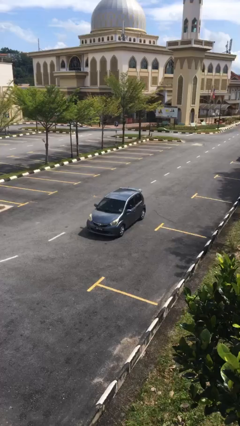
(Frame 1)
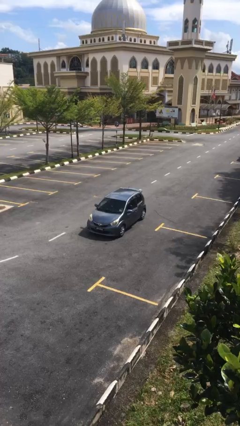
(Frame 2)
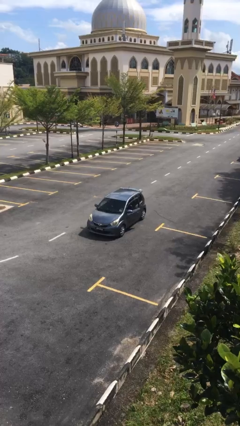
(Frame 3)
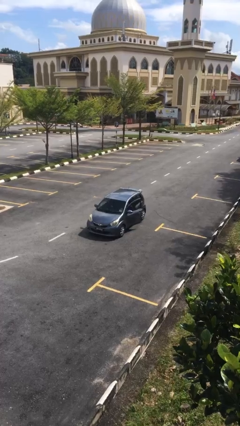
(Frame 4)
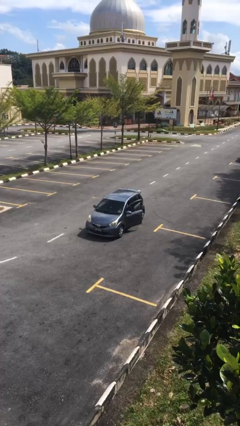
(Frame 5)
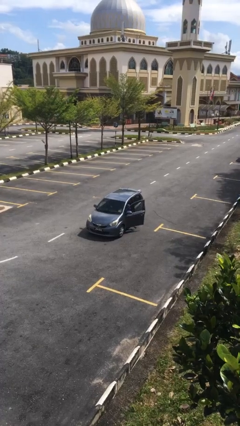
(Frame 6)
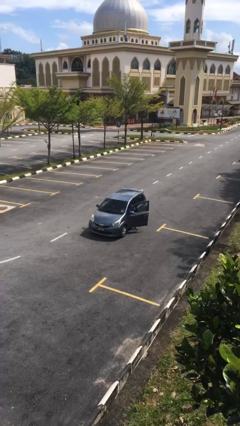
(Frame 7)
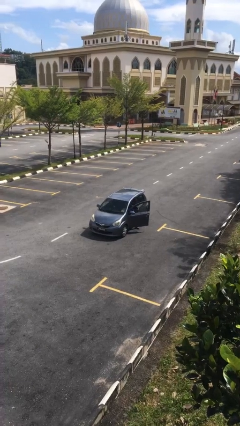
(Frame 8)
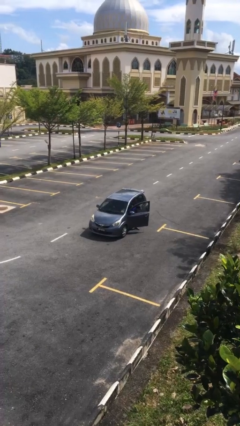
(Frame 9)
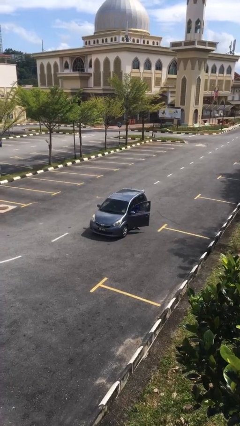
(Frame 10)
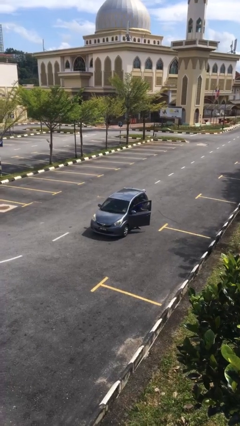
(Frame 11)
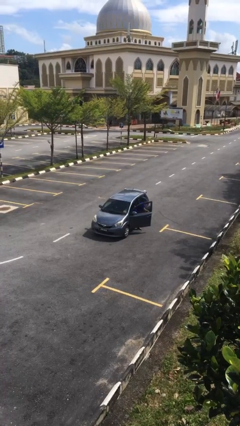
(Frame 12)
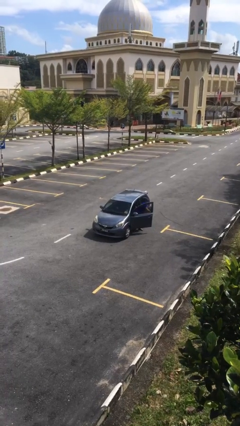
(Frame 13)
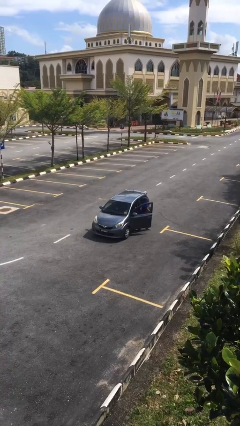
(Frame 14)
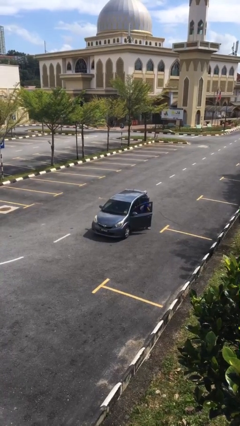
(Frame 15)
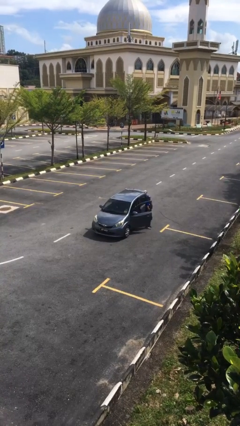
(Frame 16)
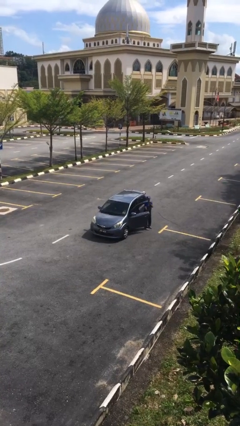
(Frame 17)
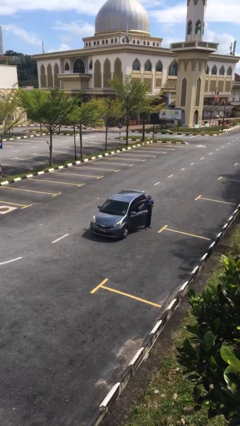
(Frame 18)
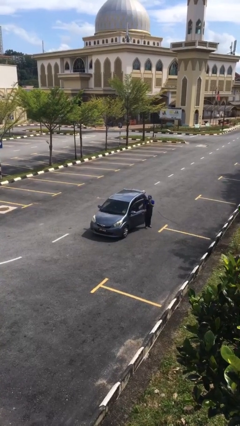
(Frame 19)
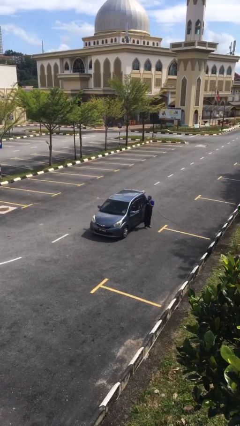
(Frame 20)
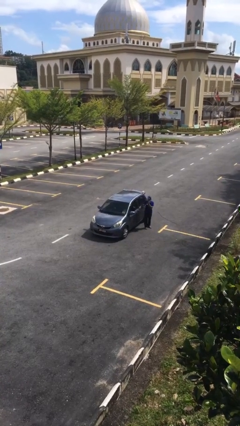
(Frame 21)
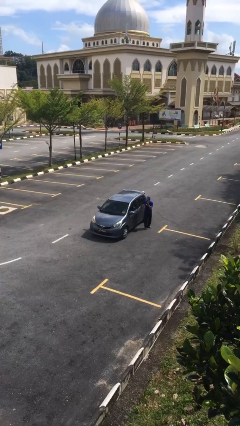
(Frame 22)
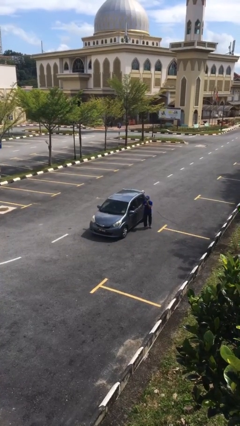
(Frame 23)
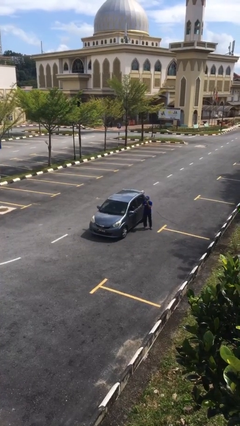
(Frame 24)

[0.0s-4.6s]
car drops off person

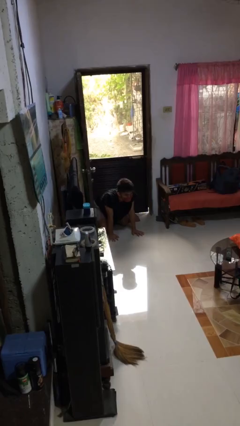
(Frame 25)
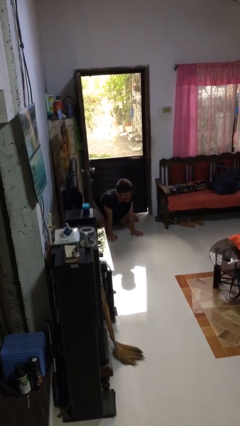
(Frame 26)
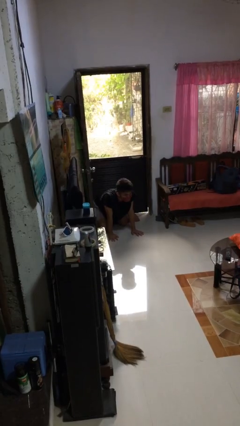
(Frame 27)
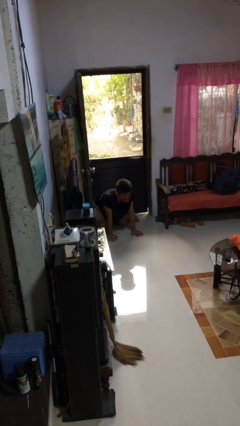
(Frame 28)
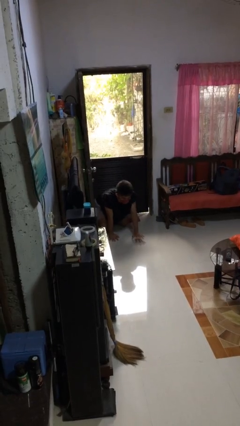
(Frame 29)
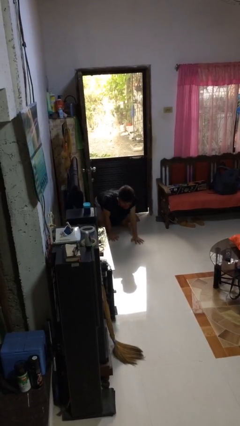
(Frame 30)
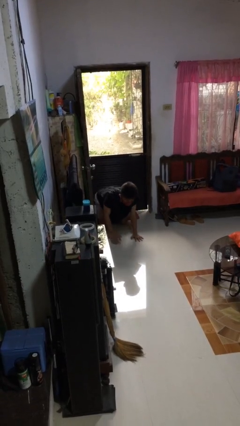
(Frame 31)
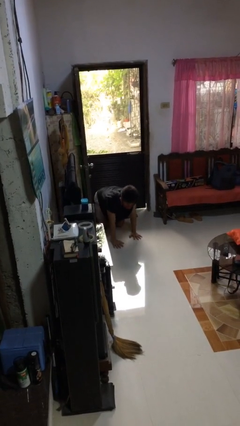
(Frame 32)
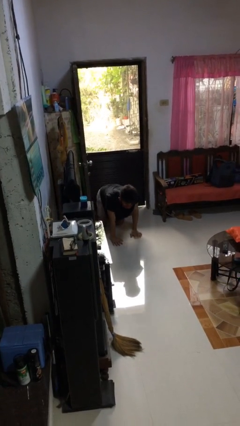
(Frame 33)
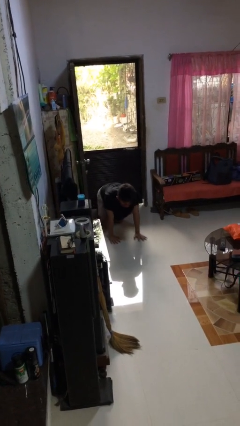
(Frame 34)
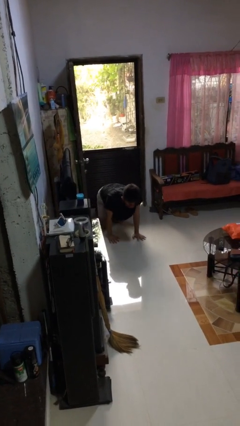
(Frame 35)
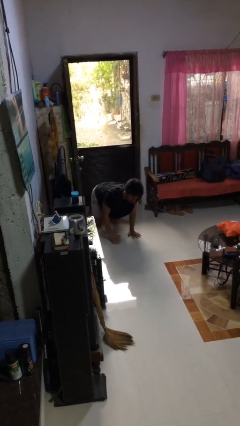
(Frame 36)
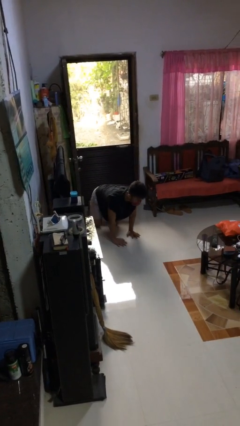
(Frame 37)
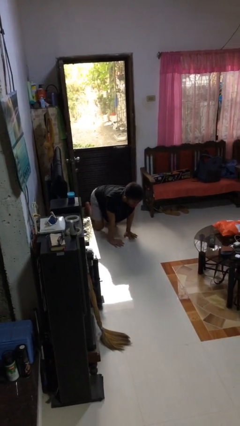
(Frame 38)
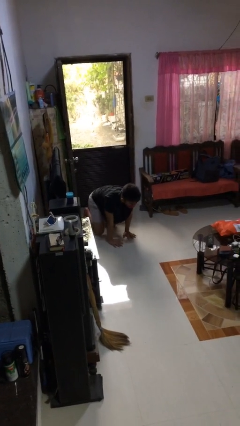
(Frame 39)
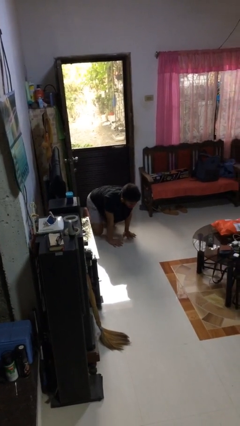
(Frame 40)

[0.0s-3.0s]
person crawls

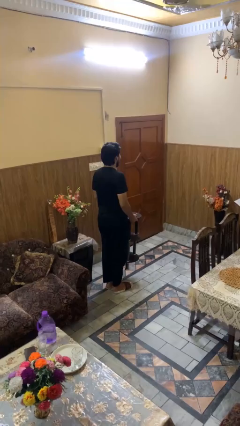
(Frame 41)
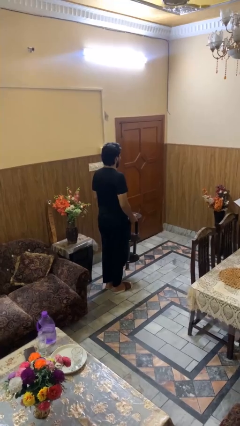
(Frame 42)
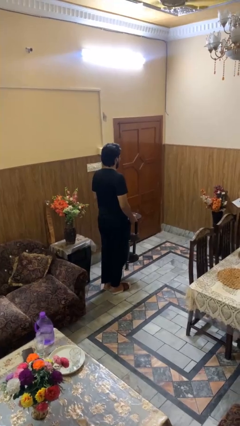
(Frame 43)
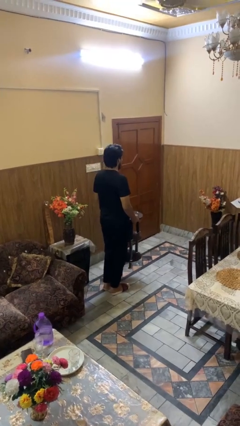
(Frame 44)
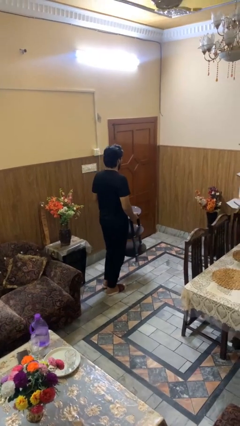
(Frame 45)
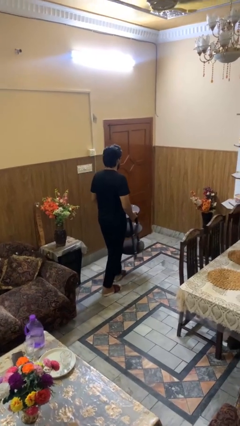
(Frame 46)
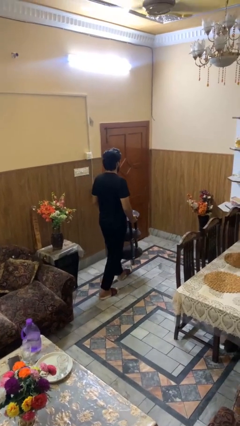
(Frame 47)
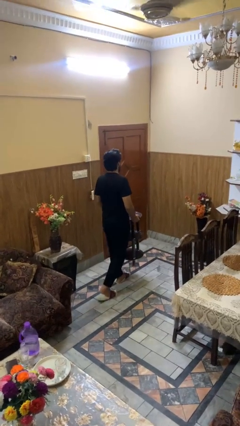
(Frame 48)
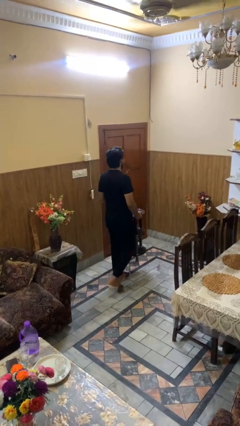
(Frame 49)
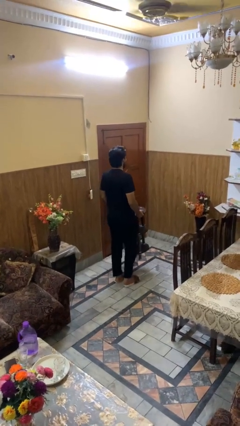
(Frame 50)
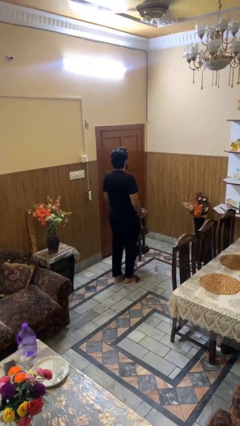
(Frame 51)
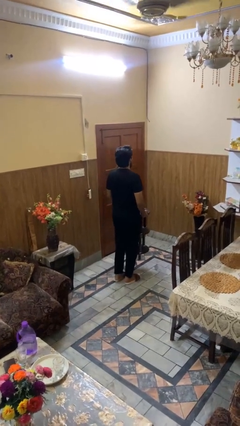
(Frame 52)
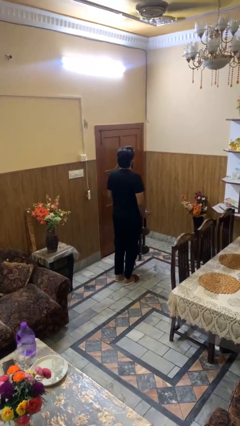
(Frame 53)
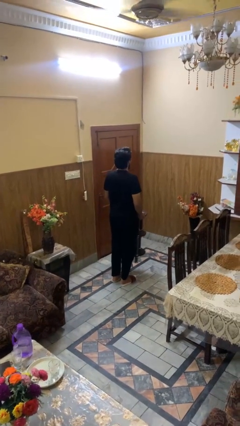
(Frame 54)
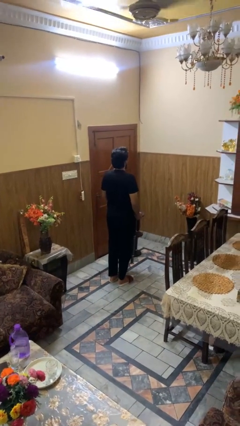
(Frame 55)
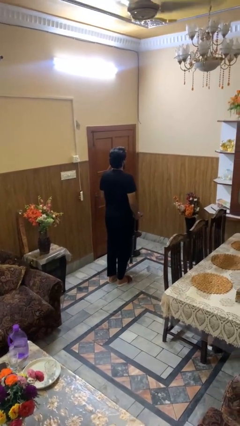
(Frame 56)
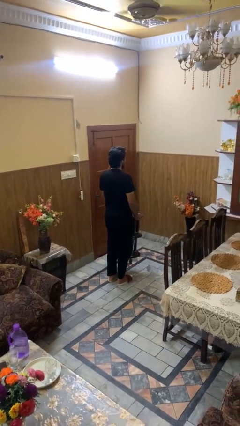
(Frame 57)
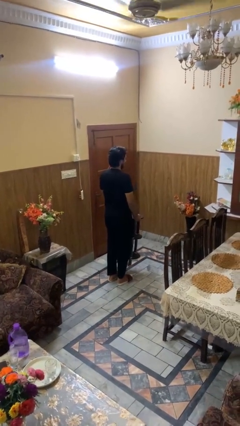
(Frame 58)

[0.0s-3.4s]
person carries furniture

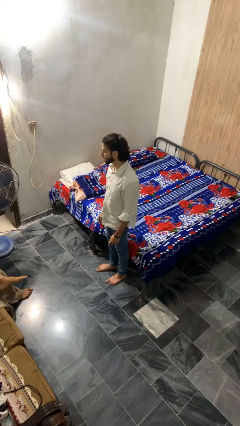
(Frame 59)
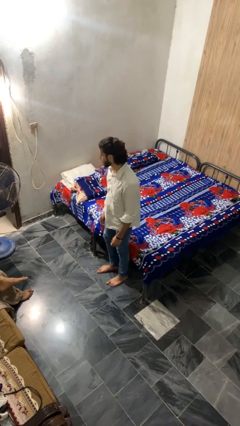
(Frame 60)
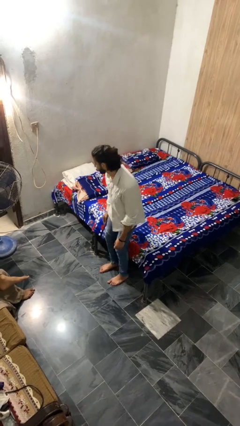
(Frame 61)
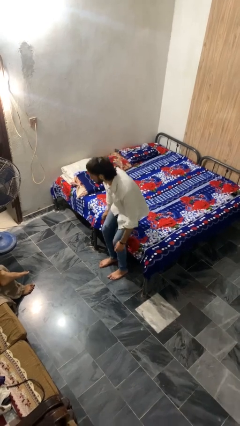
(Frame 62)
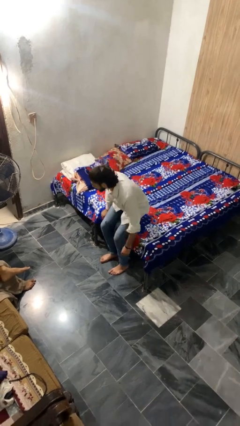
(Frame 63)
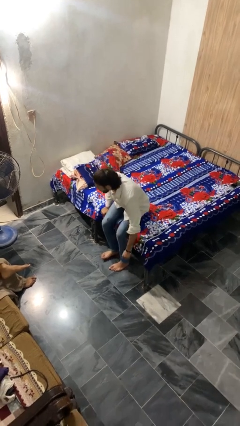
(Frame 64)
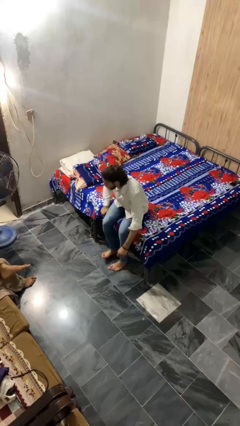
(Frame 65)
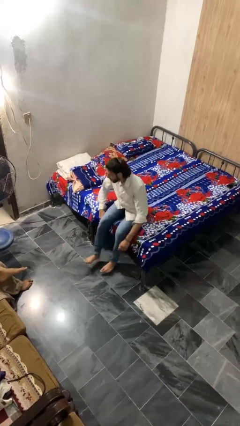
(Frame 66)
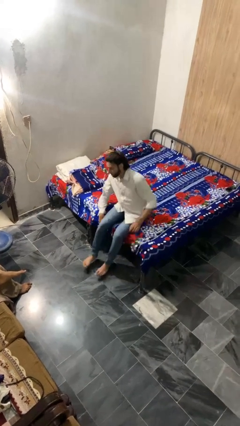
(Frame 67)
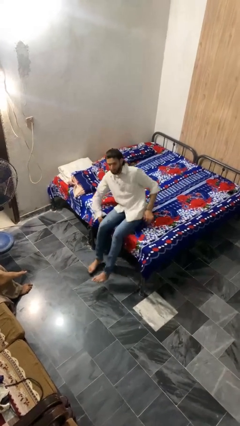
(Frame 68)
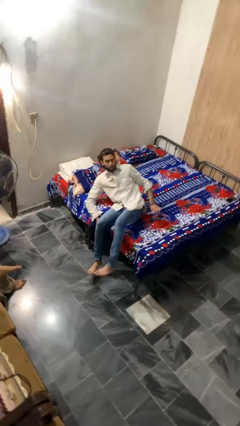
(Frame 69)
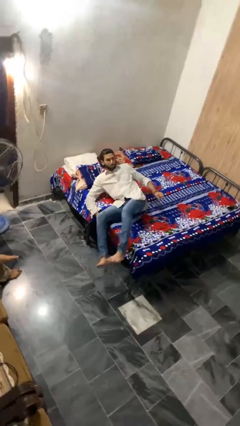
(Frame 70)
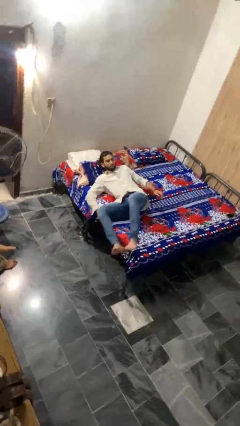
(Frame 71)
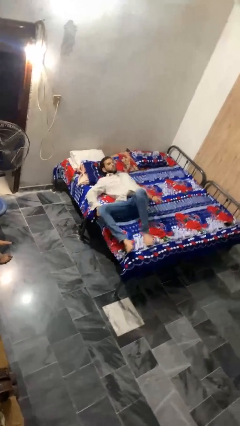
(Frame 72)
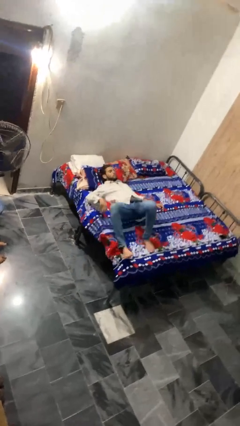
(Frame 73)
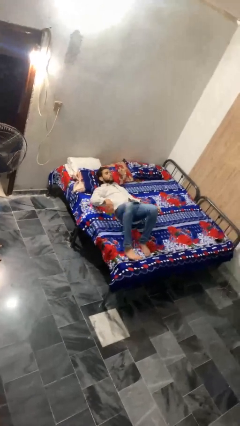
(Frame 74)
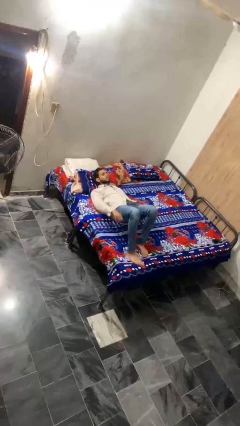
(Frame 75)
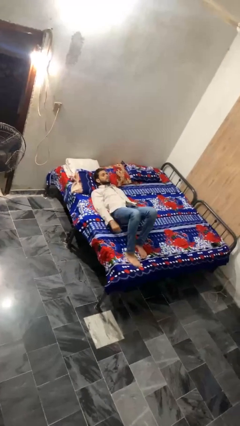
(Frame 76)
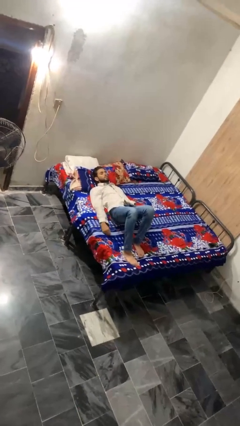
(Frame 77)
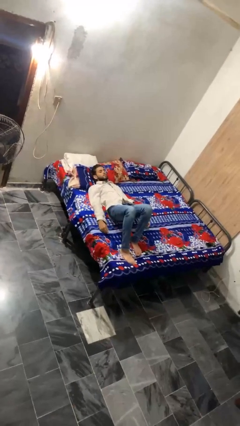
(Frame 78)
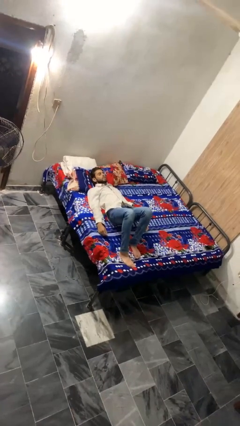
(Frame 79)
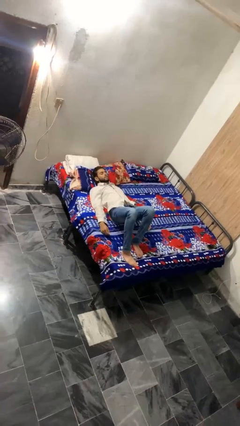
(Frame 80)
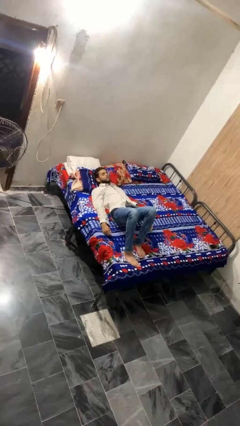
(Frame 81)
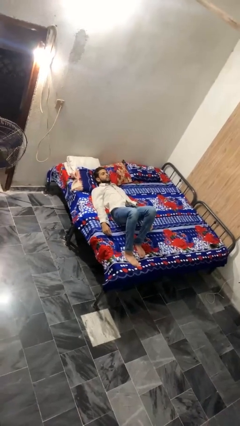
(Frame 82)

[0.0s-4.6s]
person lies down on bed

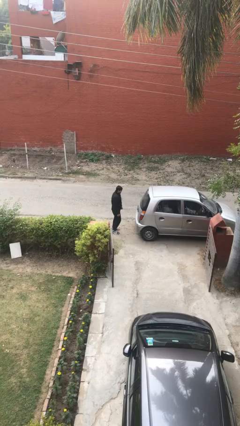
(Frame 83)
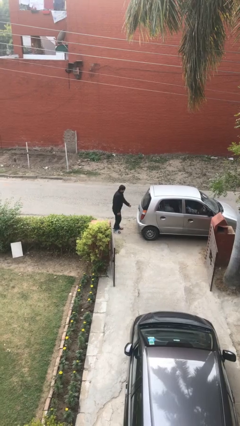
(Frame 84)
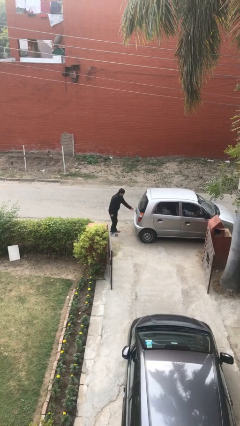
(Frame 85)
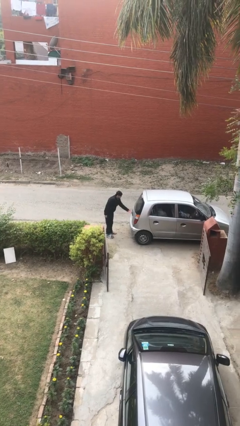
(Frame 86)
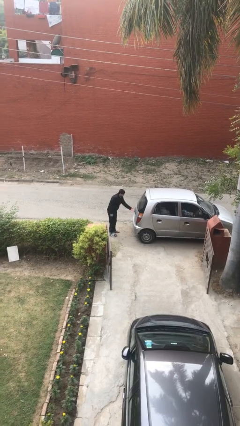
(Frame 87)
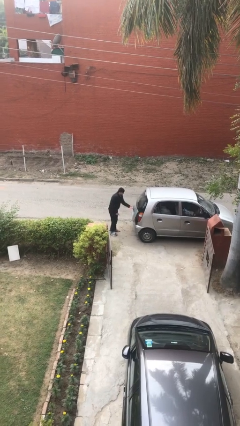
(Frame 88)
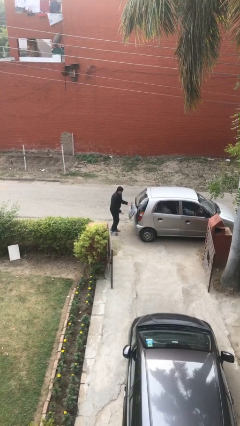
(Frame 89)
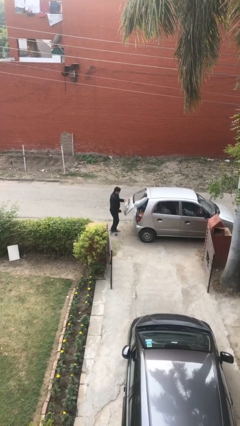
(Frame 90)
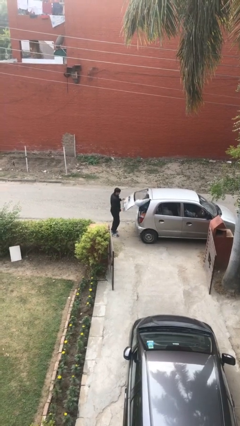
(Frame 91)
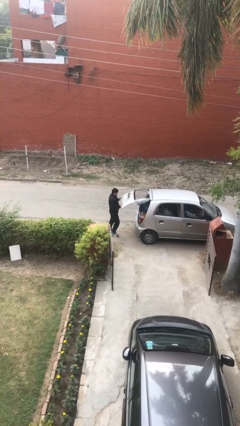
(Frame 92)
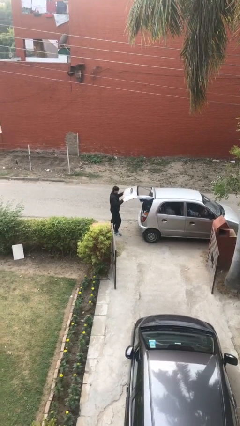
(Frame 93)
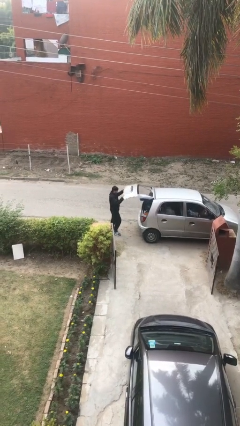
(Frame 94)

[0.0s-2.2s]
person opens car trunk
